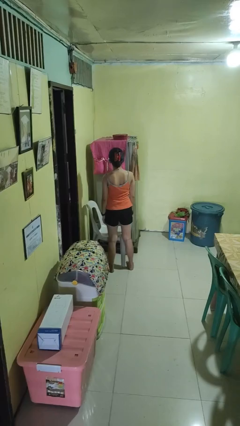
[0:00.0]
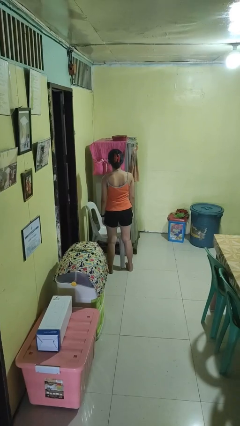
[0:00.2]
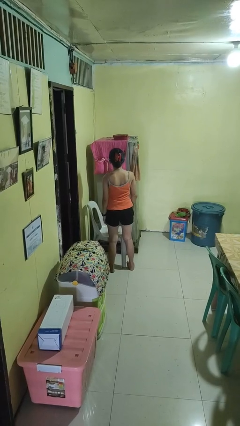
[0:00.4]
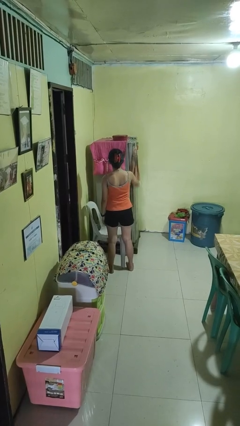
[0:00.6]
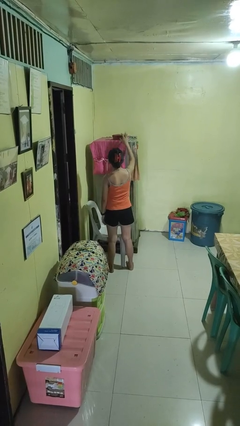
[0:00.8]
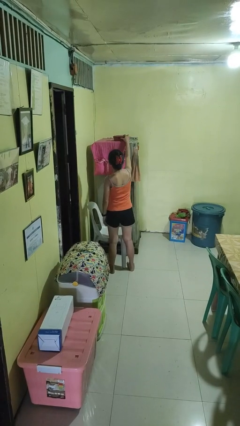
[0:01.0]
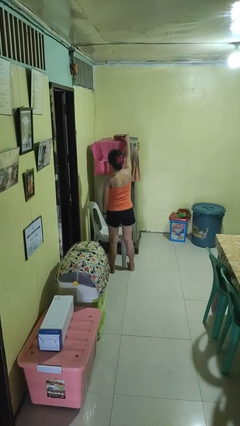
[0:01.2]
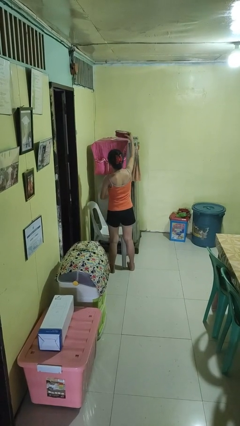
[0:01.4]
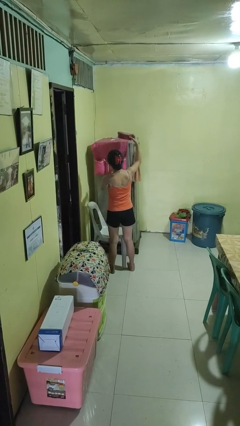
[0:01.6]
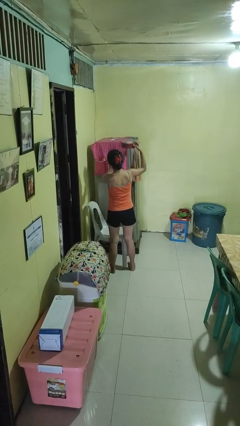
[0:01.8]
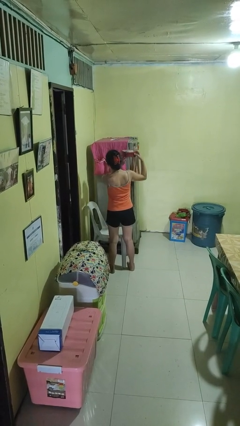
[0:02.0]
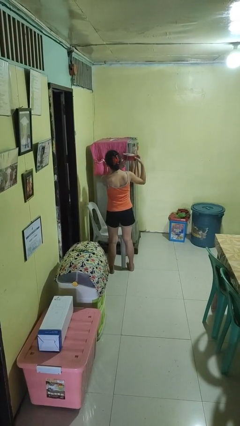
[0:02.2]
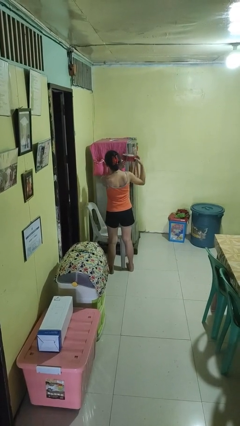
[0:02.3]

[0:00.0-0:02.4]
person picks up object from shelf

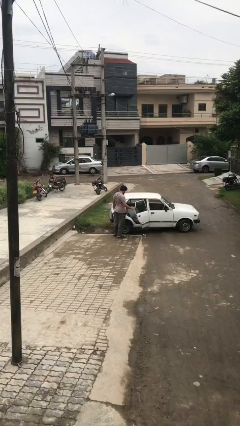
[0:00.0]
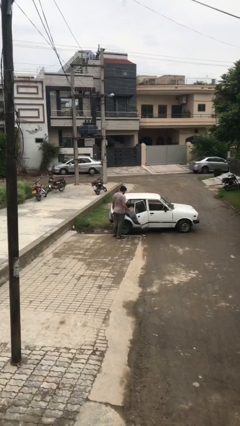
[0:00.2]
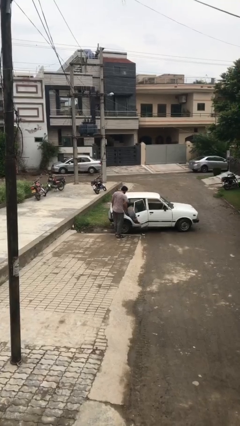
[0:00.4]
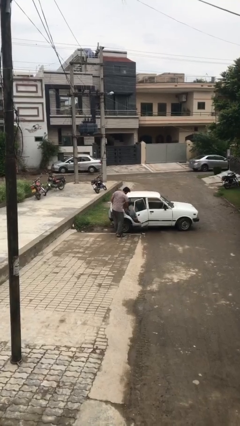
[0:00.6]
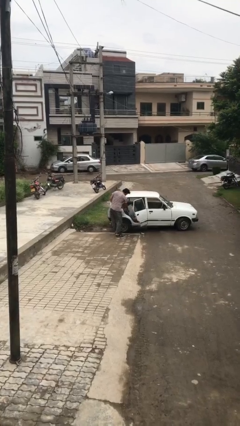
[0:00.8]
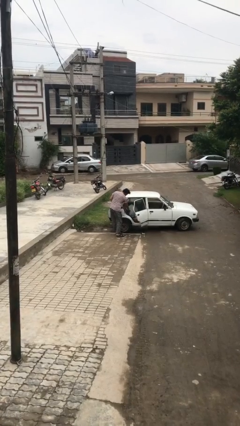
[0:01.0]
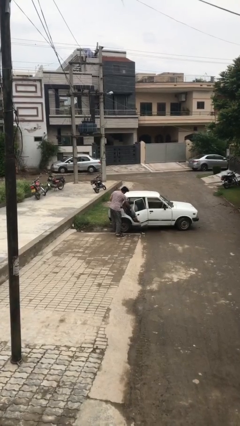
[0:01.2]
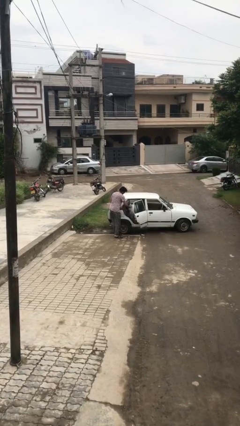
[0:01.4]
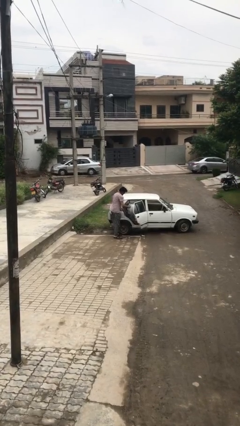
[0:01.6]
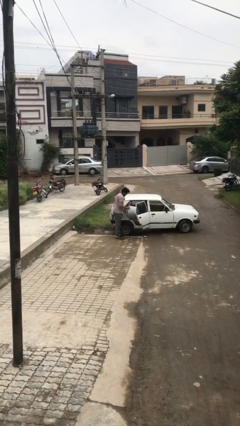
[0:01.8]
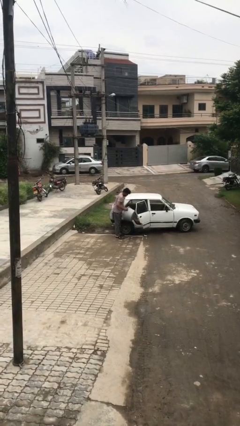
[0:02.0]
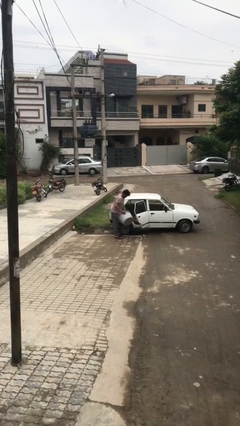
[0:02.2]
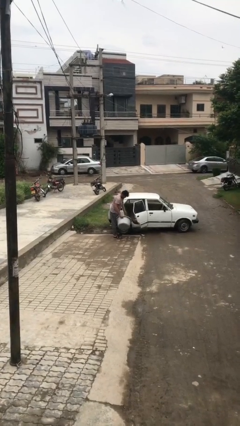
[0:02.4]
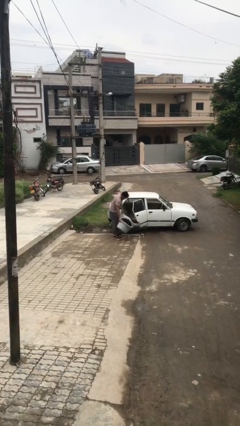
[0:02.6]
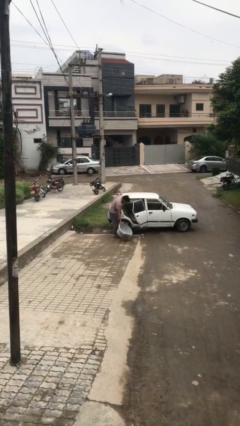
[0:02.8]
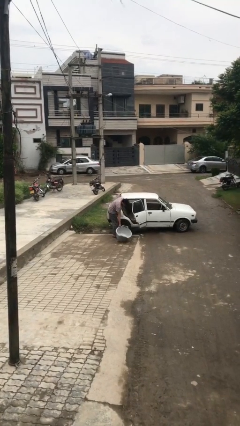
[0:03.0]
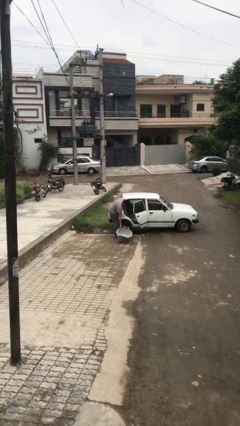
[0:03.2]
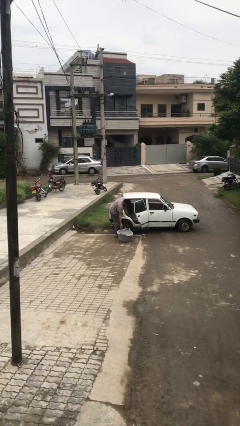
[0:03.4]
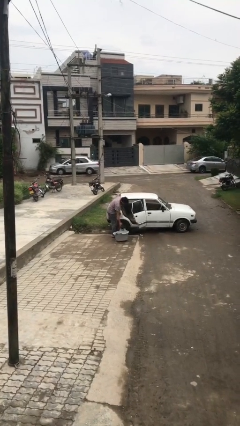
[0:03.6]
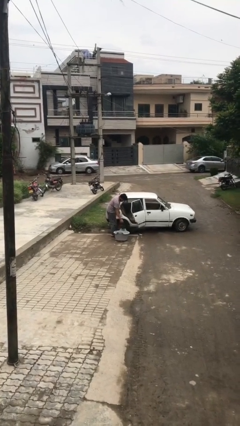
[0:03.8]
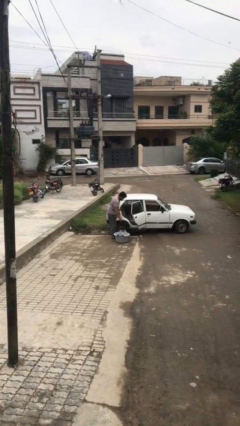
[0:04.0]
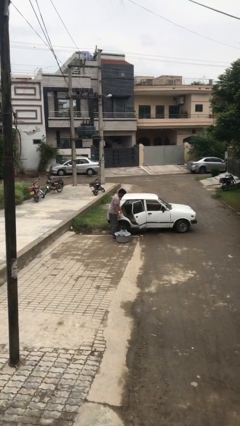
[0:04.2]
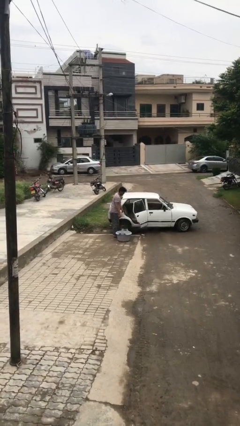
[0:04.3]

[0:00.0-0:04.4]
person unloads car

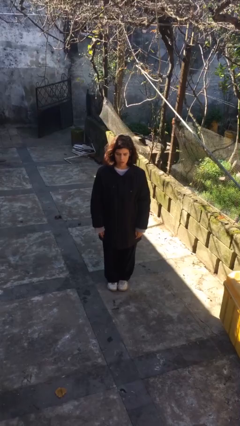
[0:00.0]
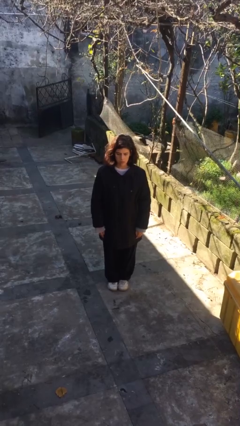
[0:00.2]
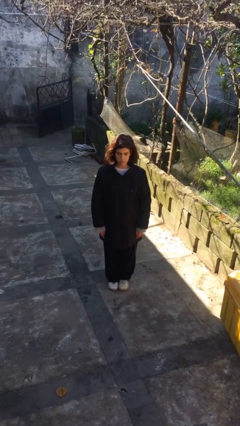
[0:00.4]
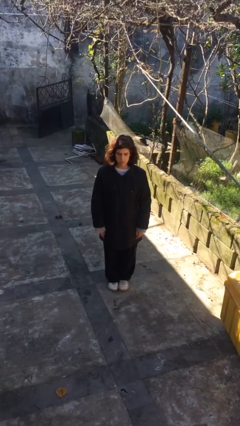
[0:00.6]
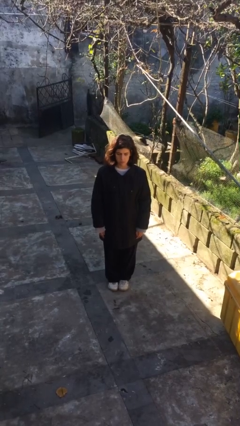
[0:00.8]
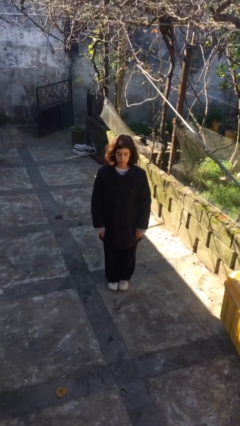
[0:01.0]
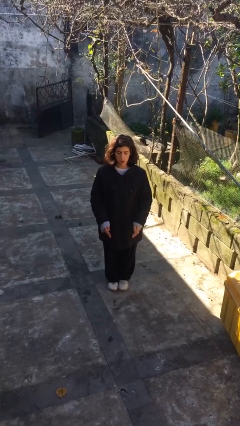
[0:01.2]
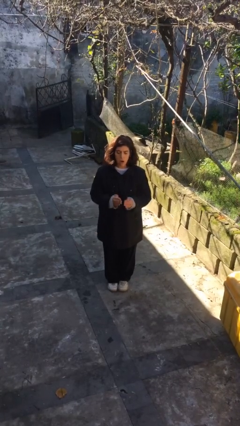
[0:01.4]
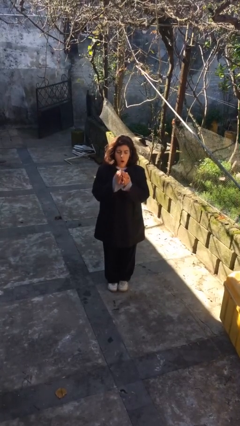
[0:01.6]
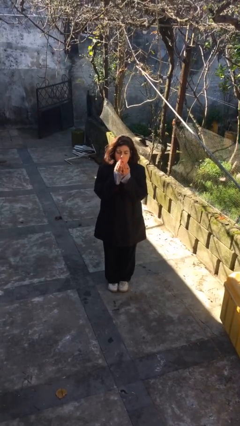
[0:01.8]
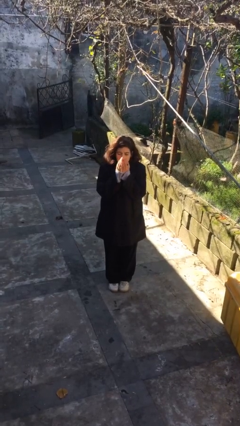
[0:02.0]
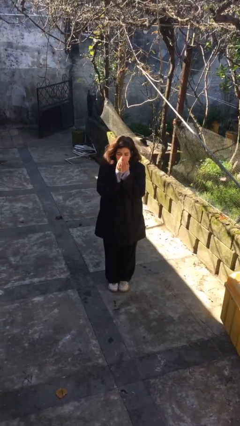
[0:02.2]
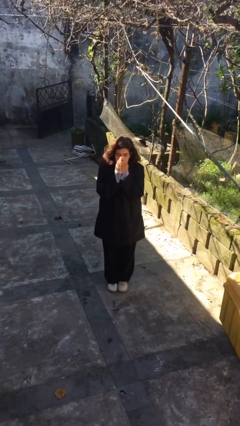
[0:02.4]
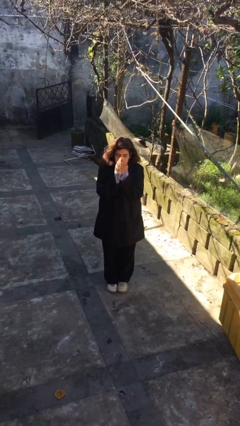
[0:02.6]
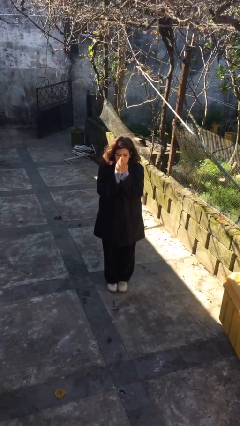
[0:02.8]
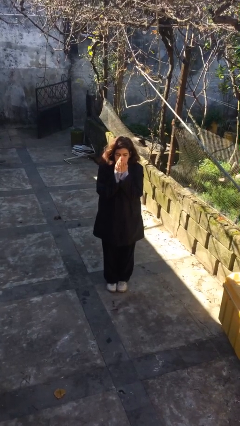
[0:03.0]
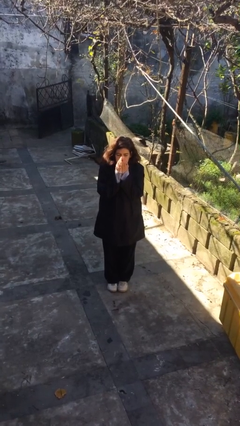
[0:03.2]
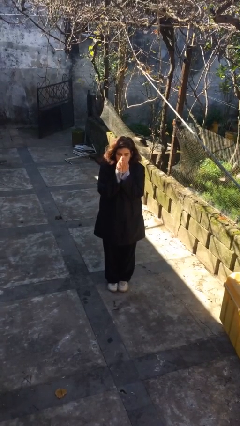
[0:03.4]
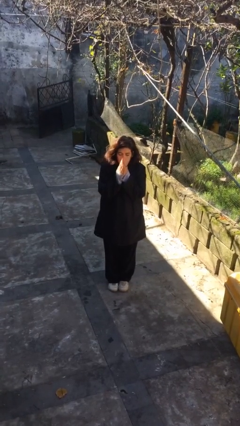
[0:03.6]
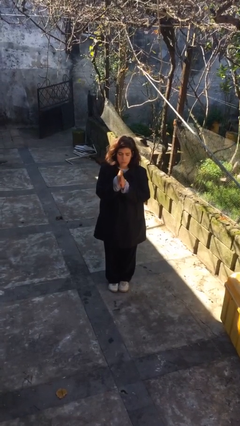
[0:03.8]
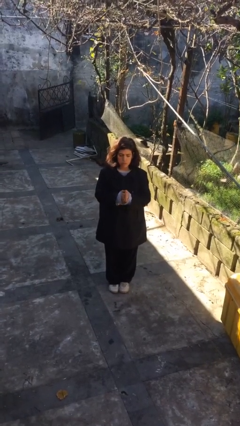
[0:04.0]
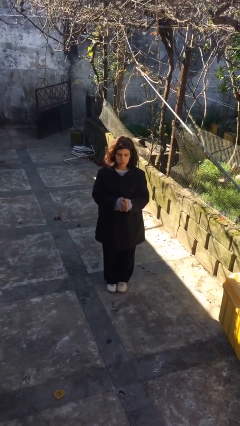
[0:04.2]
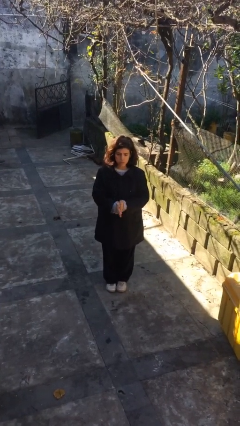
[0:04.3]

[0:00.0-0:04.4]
person blows into hands

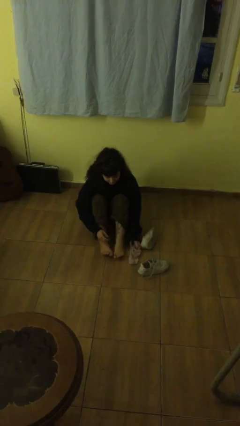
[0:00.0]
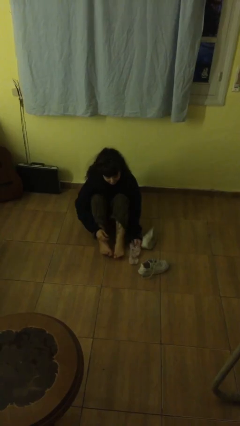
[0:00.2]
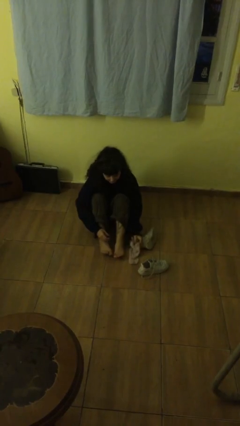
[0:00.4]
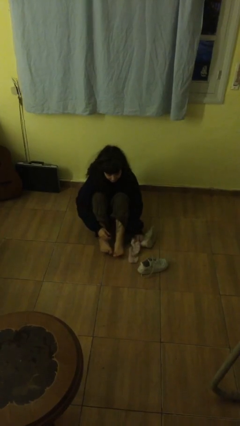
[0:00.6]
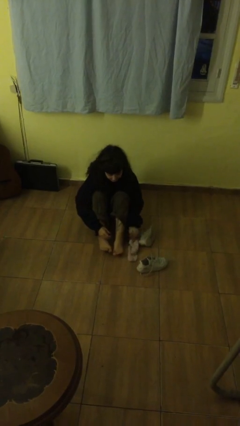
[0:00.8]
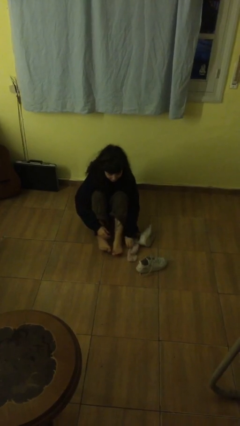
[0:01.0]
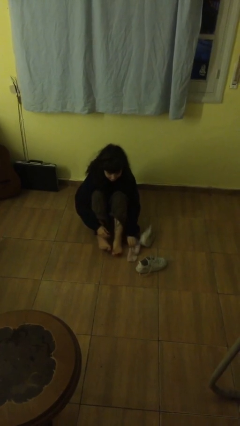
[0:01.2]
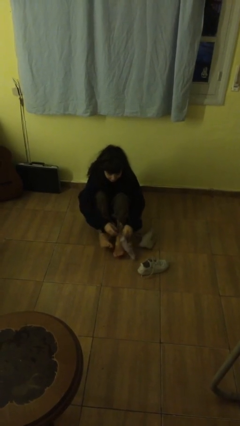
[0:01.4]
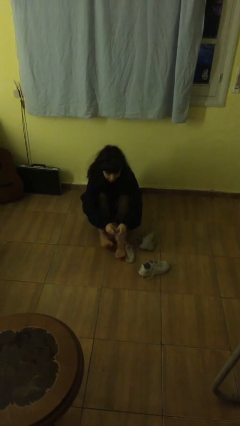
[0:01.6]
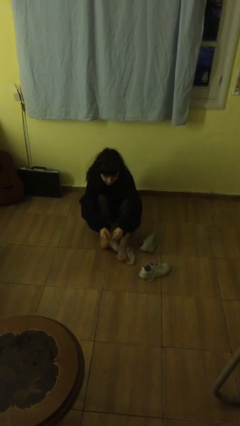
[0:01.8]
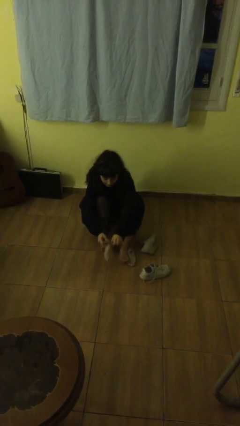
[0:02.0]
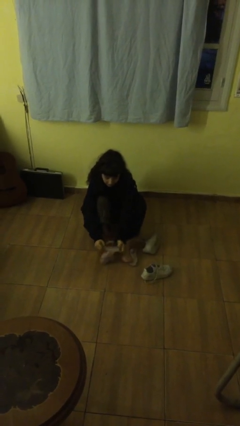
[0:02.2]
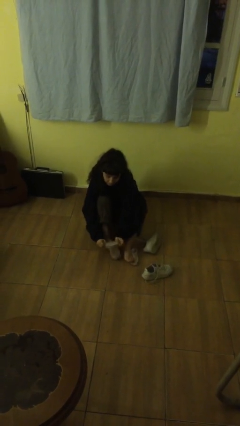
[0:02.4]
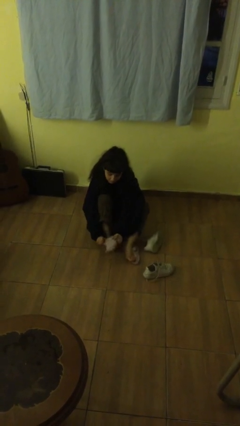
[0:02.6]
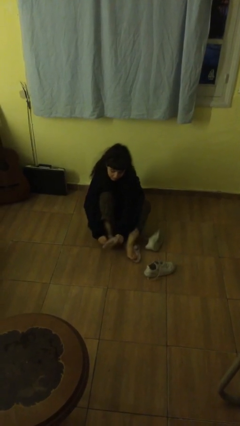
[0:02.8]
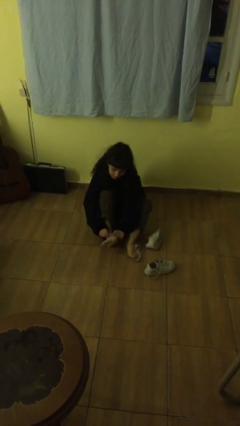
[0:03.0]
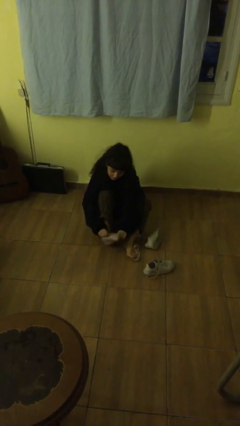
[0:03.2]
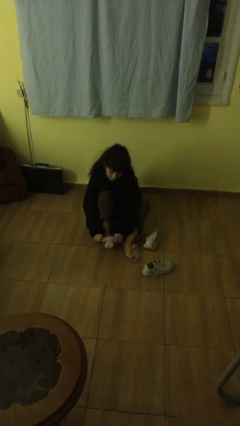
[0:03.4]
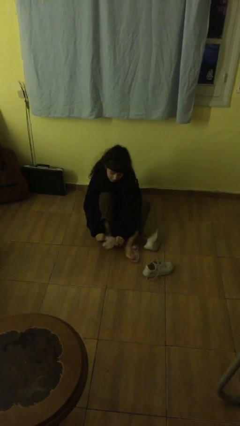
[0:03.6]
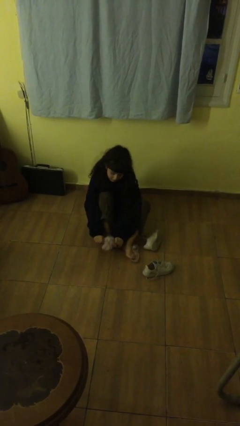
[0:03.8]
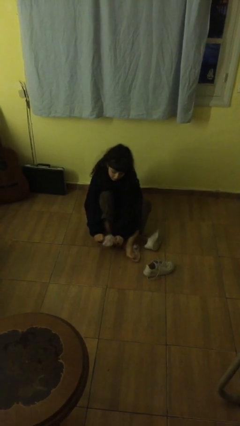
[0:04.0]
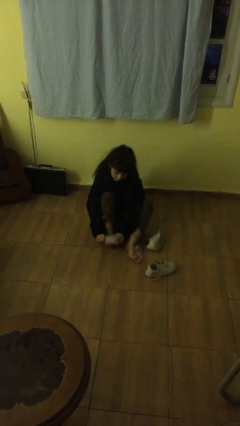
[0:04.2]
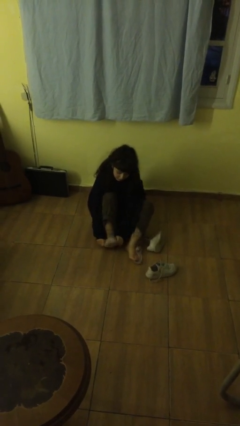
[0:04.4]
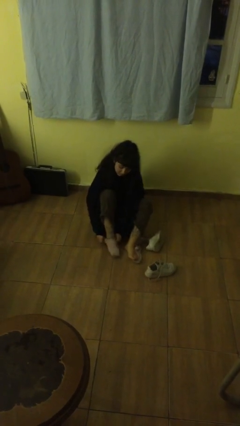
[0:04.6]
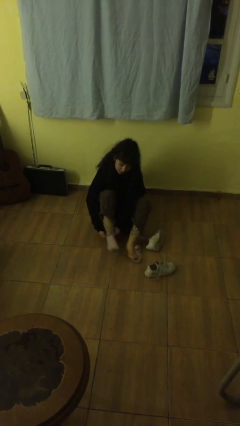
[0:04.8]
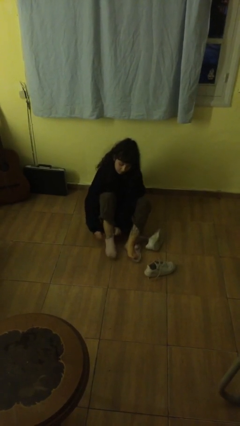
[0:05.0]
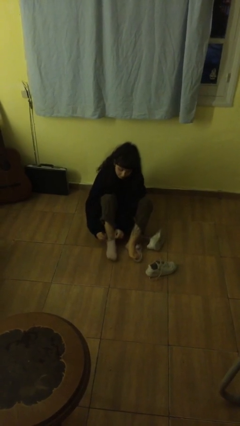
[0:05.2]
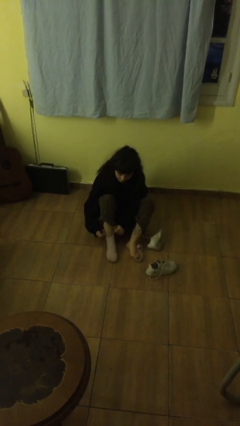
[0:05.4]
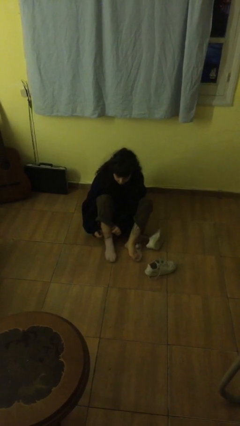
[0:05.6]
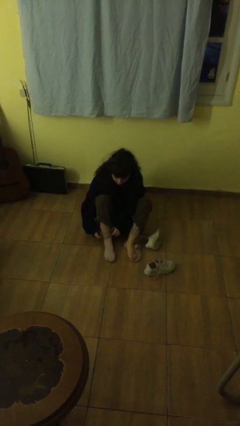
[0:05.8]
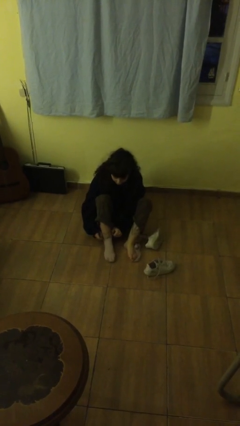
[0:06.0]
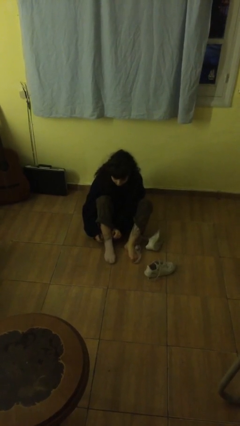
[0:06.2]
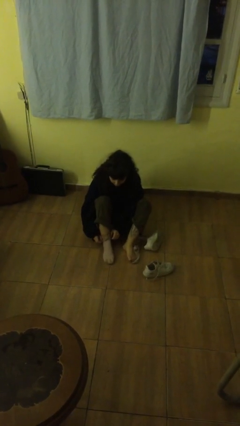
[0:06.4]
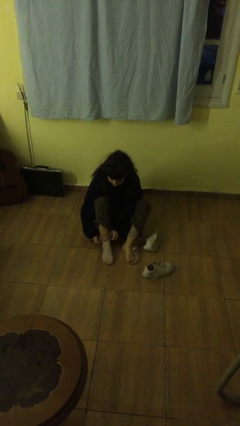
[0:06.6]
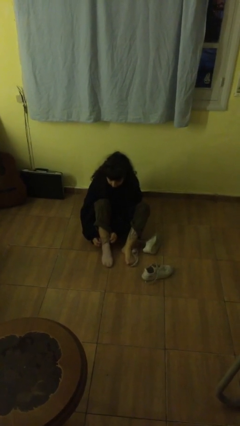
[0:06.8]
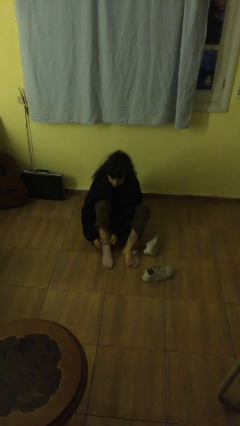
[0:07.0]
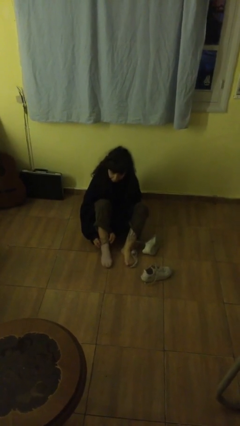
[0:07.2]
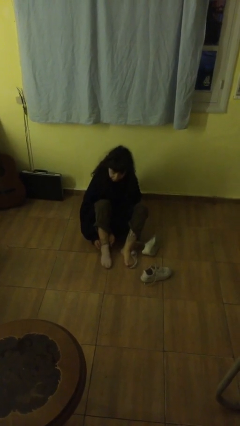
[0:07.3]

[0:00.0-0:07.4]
person puts on socks
